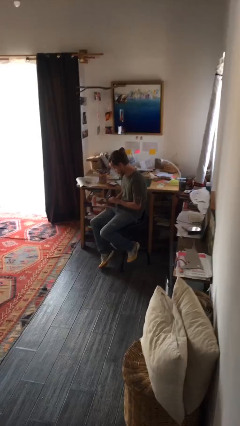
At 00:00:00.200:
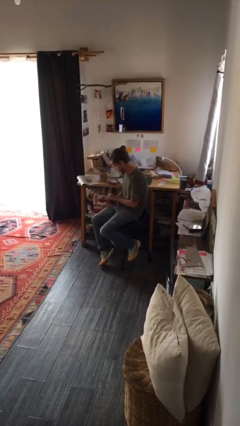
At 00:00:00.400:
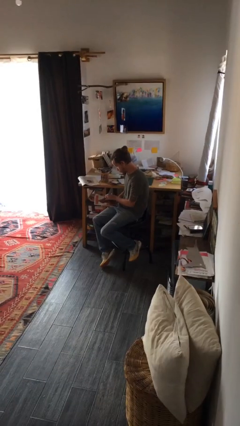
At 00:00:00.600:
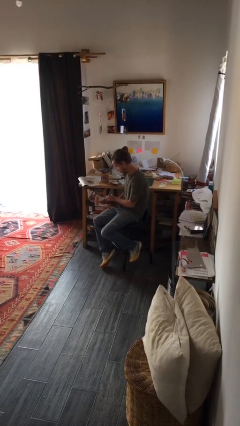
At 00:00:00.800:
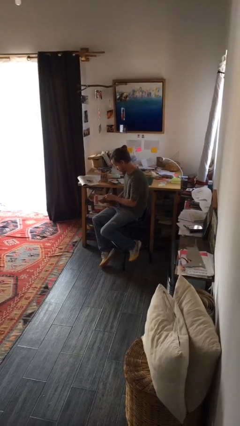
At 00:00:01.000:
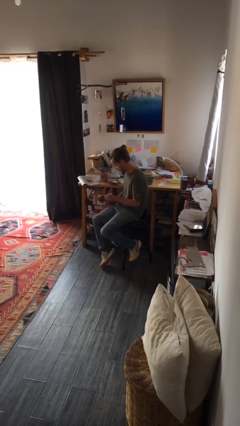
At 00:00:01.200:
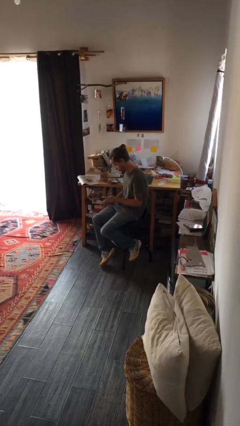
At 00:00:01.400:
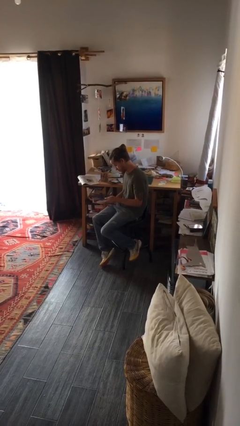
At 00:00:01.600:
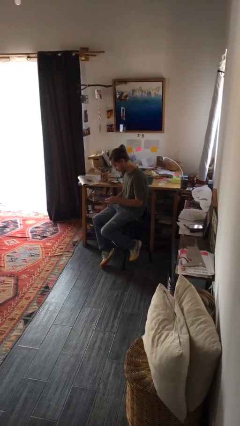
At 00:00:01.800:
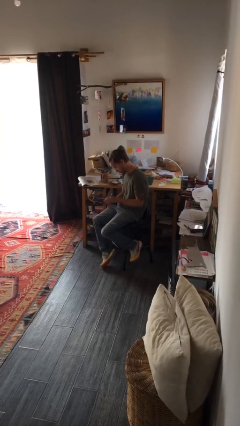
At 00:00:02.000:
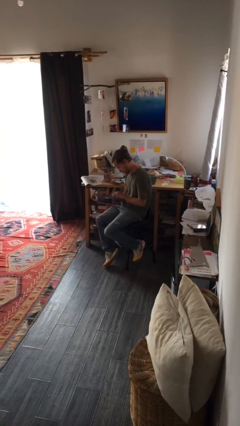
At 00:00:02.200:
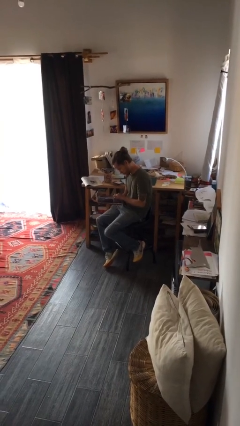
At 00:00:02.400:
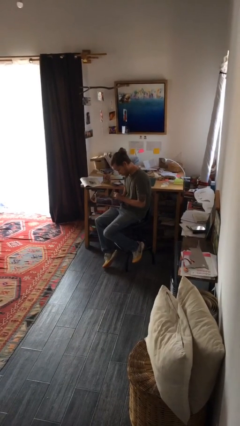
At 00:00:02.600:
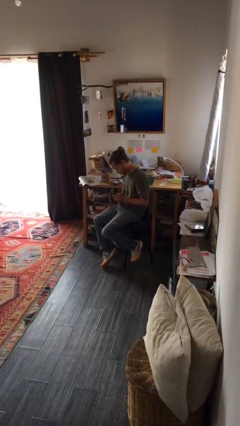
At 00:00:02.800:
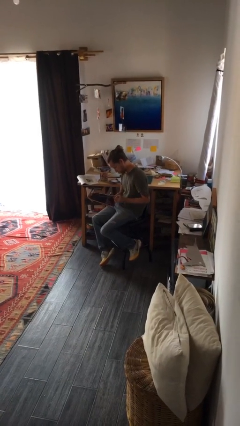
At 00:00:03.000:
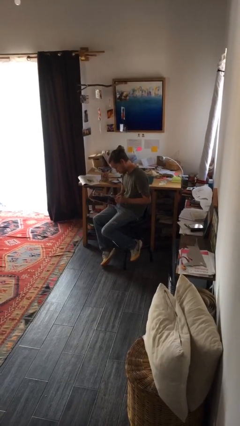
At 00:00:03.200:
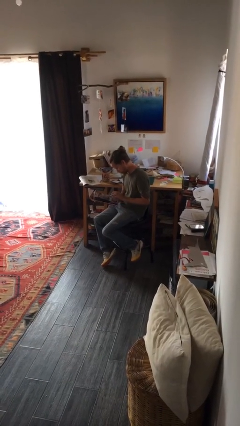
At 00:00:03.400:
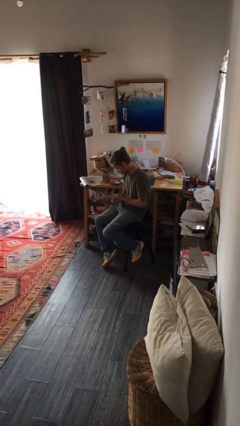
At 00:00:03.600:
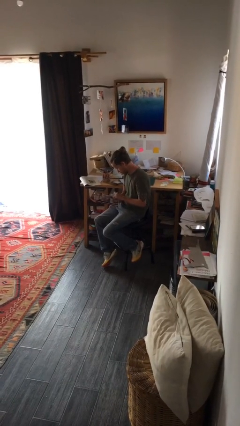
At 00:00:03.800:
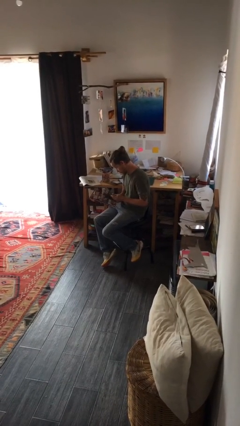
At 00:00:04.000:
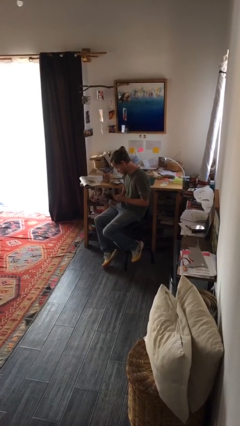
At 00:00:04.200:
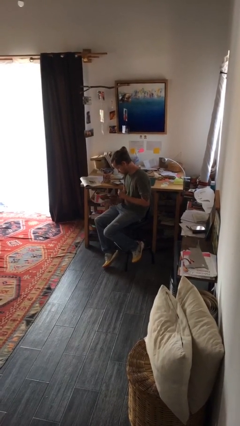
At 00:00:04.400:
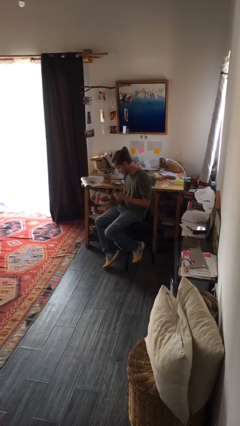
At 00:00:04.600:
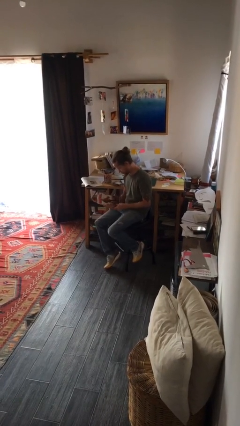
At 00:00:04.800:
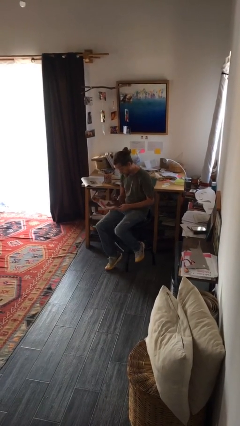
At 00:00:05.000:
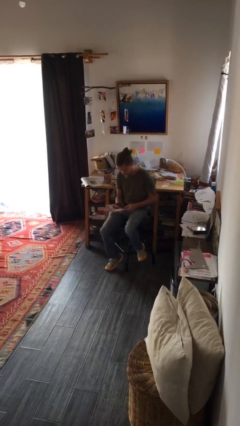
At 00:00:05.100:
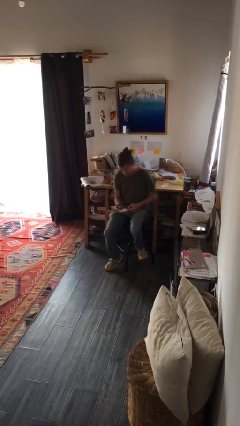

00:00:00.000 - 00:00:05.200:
person reads magazine

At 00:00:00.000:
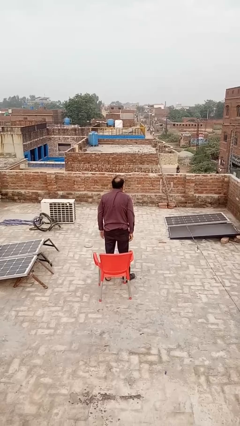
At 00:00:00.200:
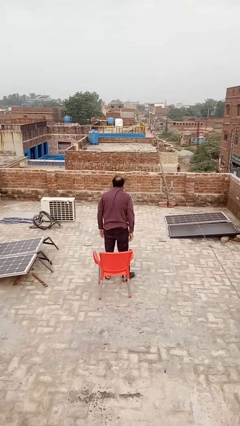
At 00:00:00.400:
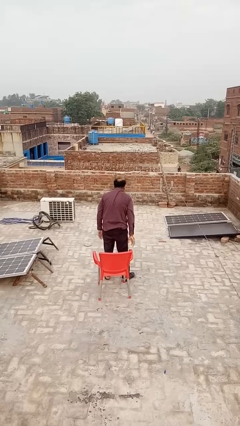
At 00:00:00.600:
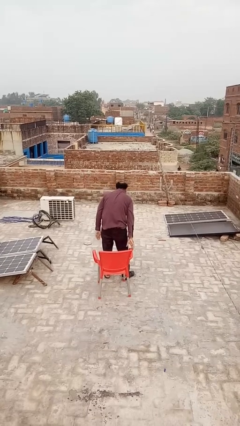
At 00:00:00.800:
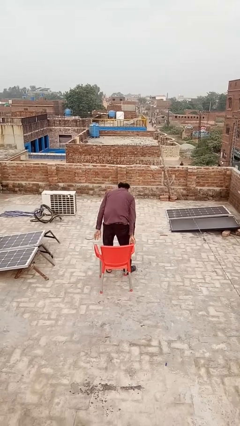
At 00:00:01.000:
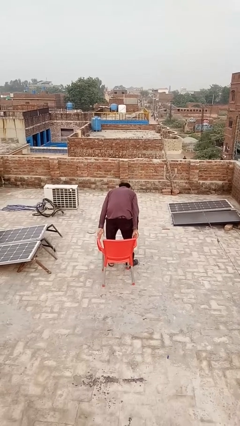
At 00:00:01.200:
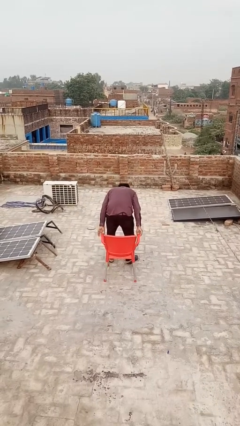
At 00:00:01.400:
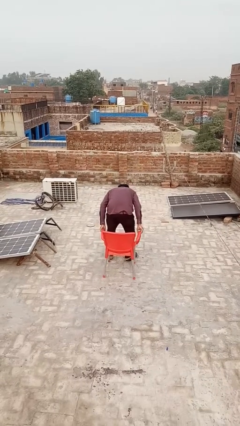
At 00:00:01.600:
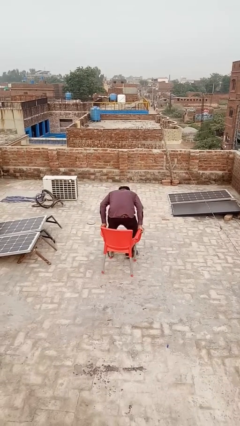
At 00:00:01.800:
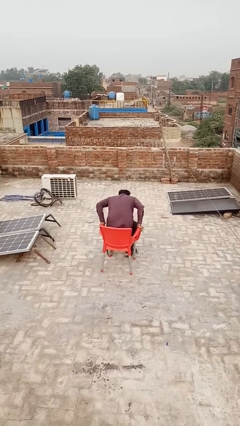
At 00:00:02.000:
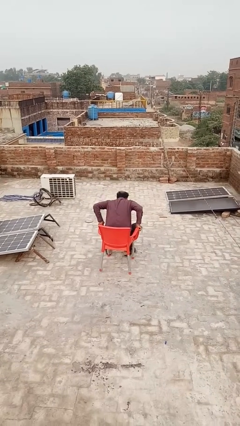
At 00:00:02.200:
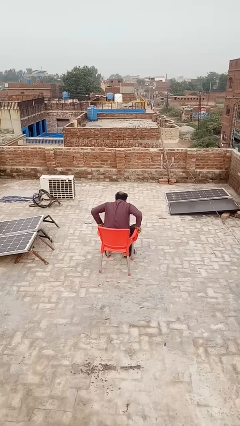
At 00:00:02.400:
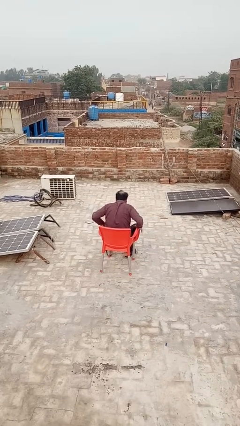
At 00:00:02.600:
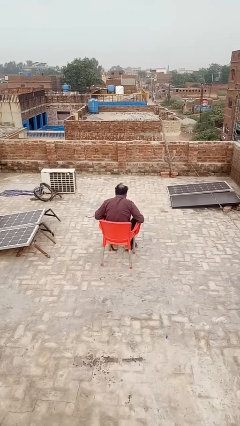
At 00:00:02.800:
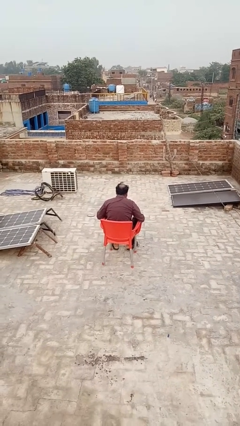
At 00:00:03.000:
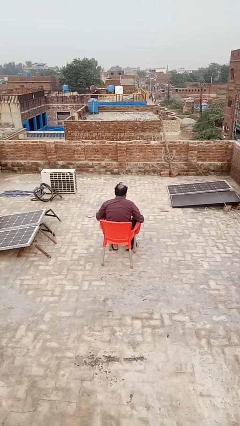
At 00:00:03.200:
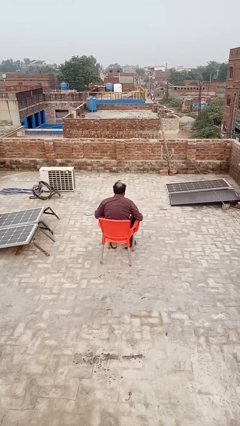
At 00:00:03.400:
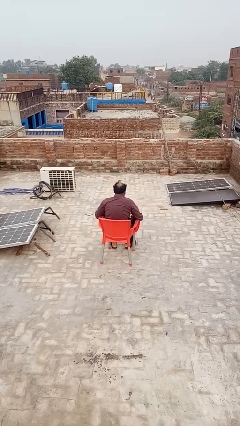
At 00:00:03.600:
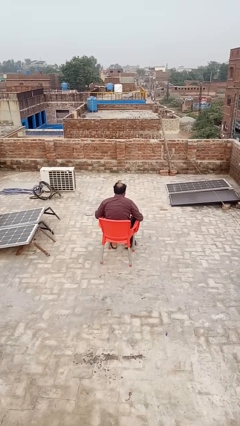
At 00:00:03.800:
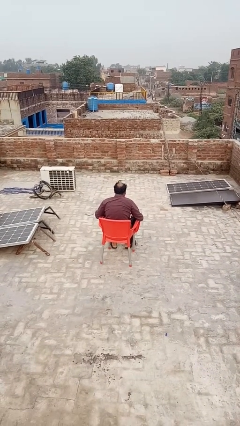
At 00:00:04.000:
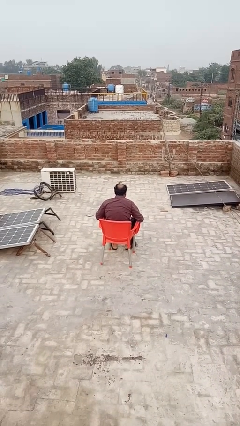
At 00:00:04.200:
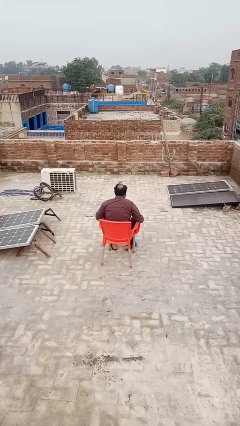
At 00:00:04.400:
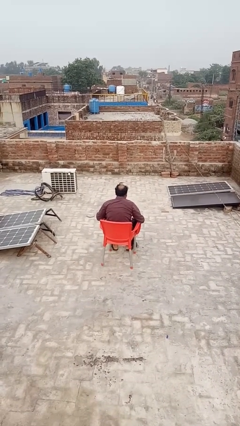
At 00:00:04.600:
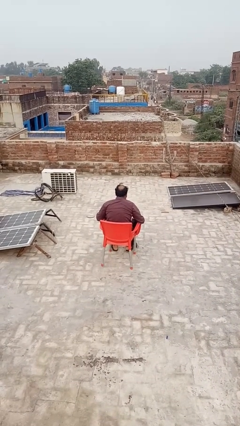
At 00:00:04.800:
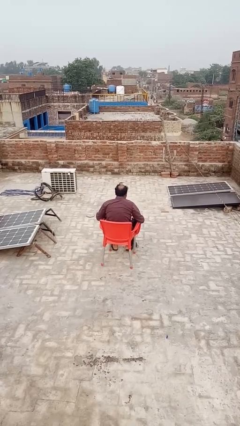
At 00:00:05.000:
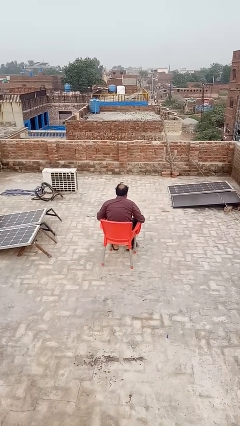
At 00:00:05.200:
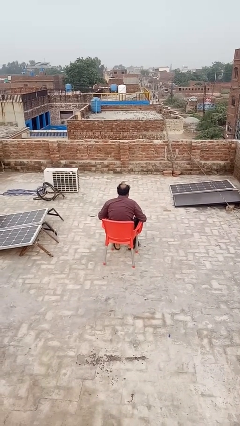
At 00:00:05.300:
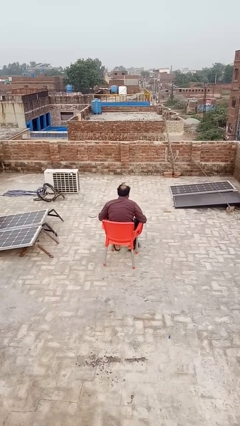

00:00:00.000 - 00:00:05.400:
person sits down

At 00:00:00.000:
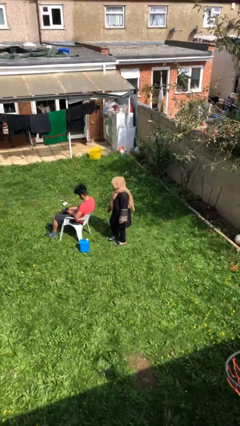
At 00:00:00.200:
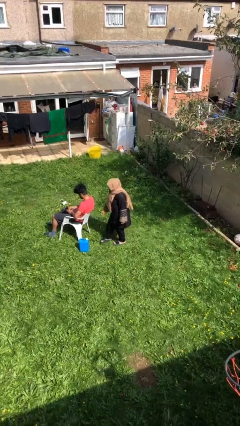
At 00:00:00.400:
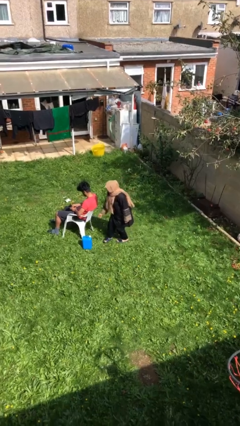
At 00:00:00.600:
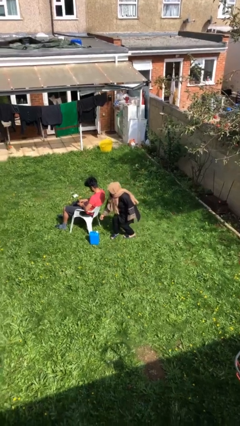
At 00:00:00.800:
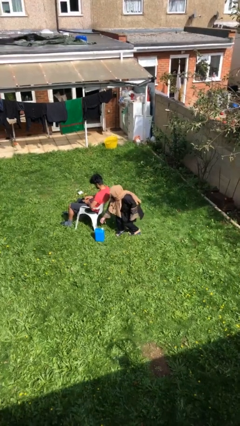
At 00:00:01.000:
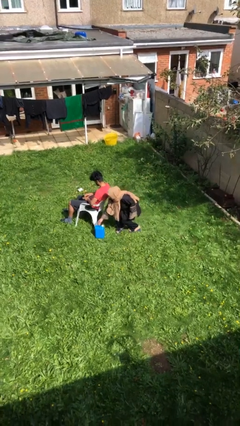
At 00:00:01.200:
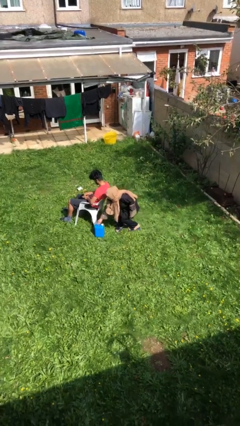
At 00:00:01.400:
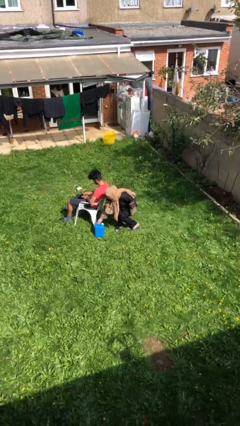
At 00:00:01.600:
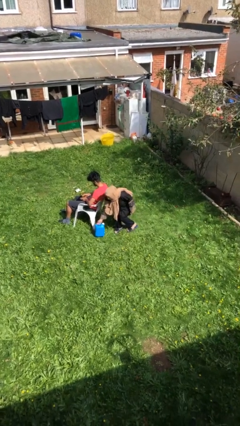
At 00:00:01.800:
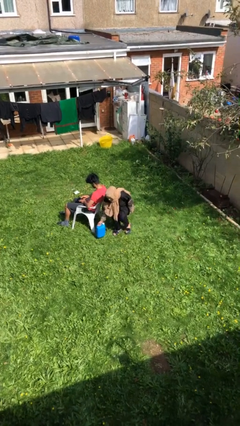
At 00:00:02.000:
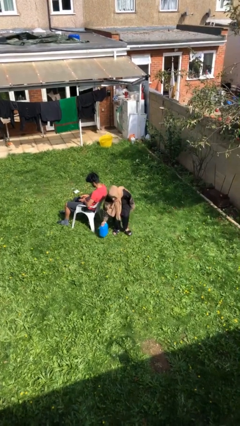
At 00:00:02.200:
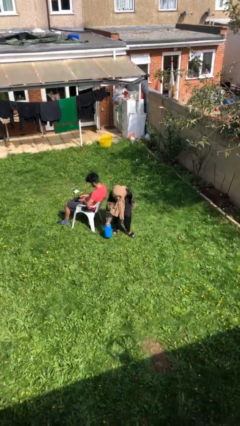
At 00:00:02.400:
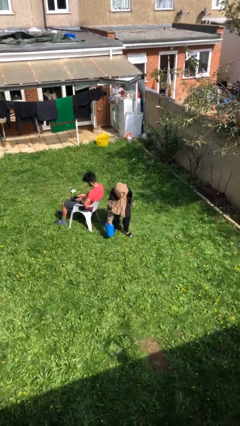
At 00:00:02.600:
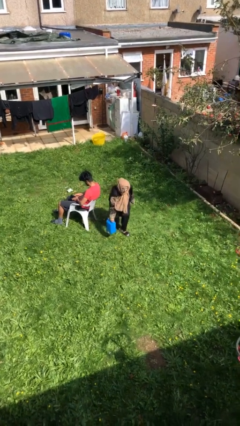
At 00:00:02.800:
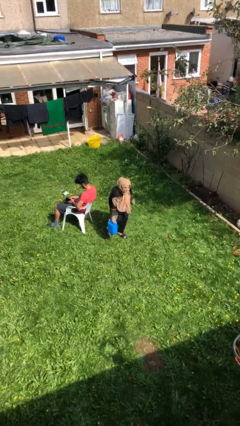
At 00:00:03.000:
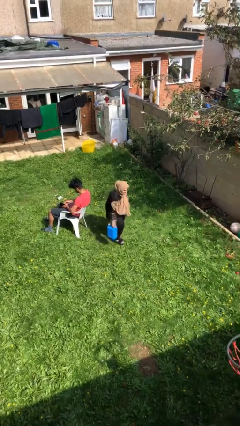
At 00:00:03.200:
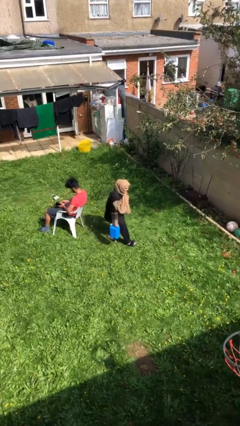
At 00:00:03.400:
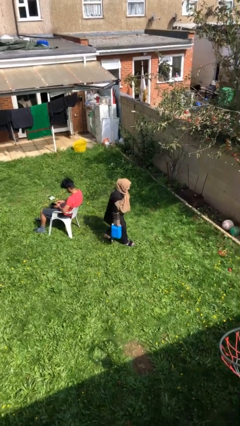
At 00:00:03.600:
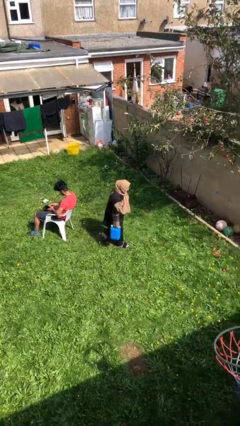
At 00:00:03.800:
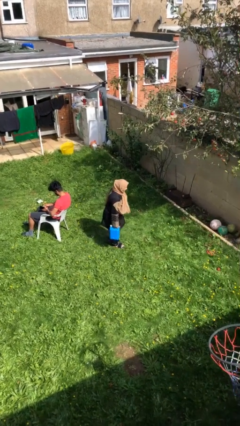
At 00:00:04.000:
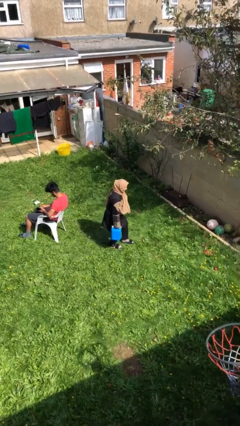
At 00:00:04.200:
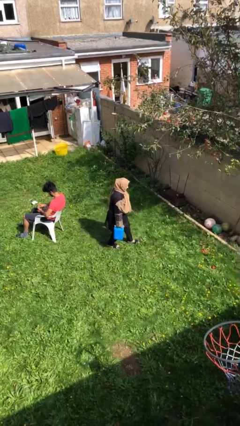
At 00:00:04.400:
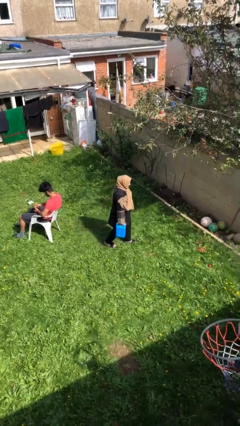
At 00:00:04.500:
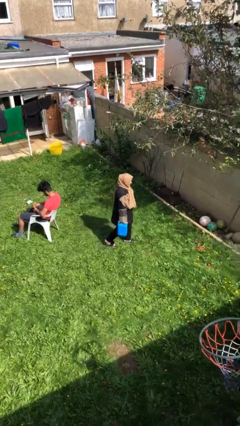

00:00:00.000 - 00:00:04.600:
person steals object from person

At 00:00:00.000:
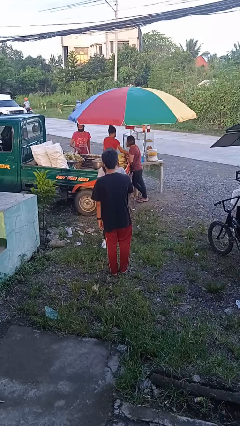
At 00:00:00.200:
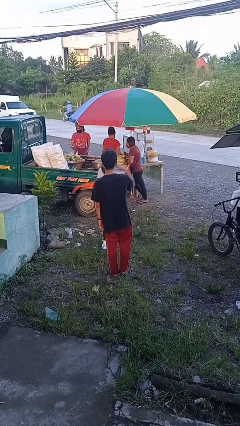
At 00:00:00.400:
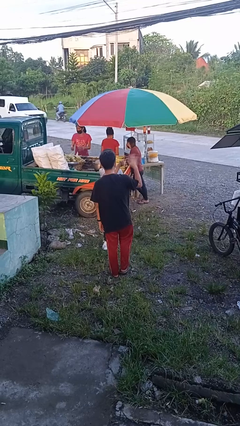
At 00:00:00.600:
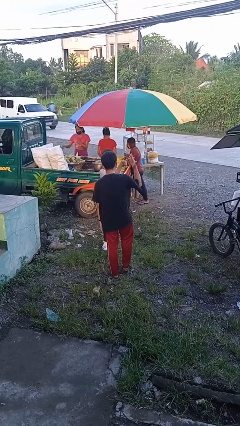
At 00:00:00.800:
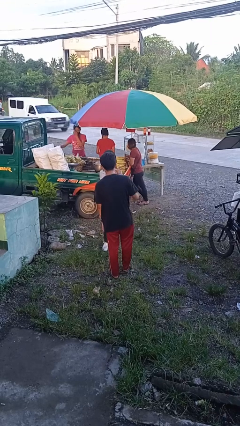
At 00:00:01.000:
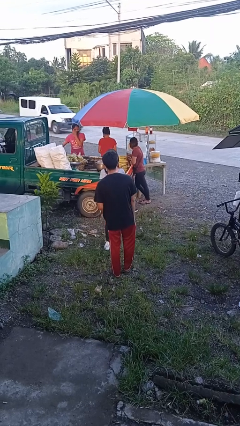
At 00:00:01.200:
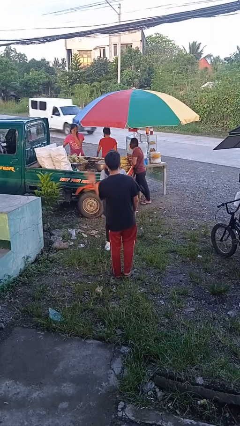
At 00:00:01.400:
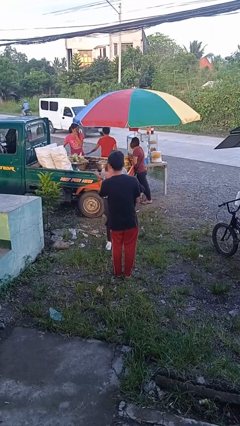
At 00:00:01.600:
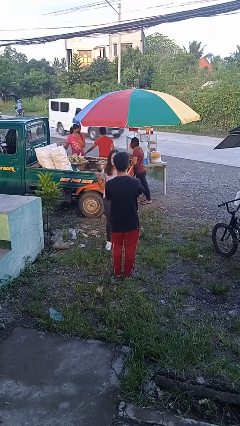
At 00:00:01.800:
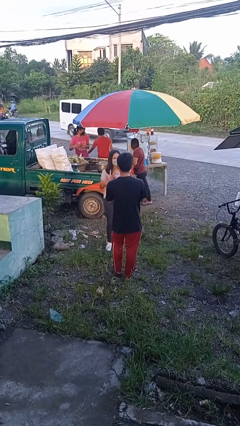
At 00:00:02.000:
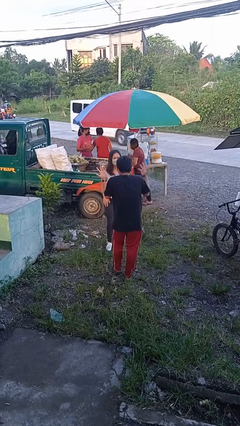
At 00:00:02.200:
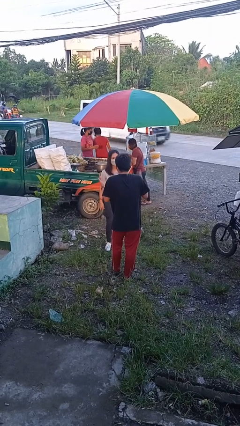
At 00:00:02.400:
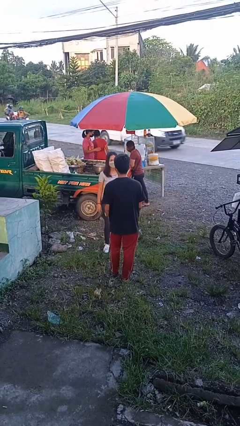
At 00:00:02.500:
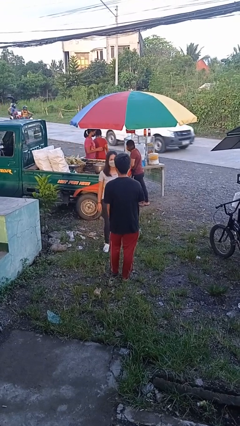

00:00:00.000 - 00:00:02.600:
person talks to person
